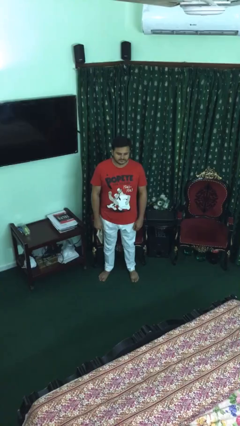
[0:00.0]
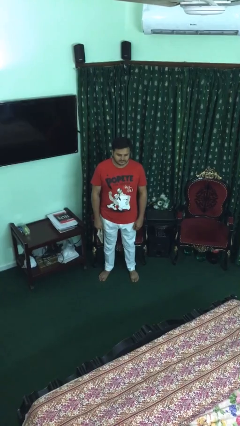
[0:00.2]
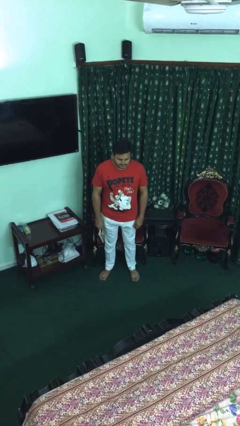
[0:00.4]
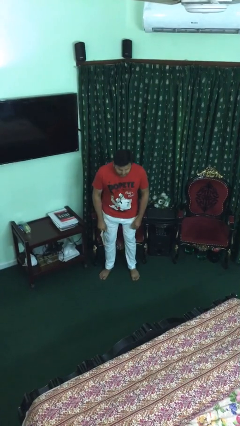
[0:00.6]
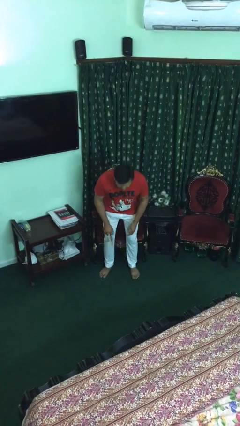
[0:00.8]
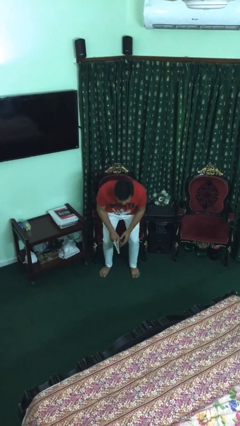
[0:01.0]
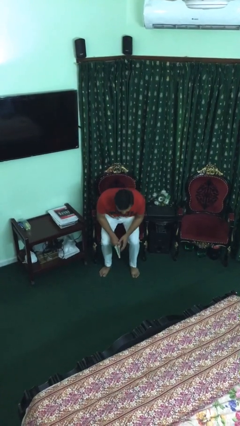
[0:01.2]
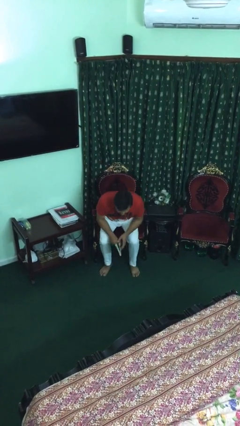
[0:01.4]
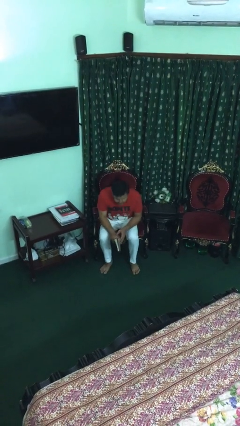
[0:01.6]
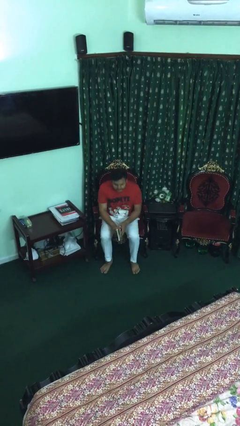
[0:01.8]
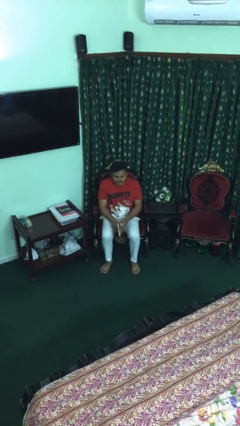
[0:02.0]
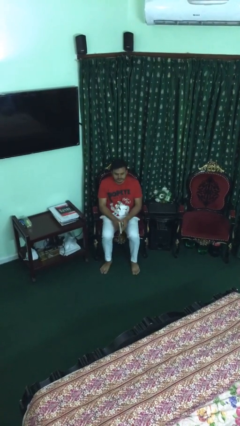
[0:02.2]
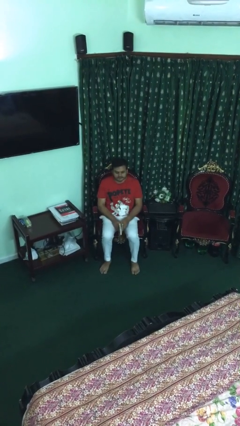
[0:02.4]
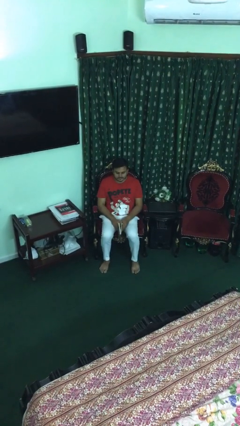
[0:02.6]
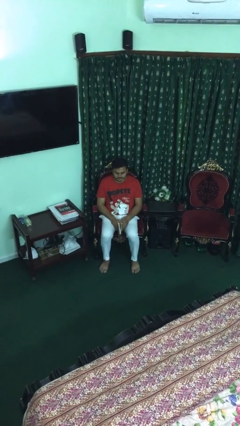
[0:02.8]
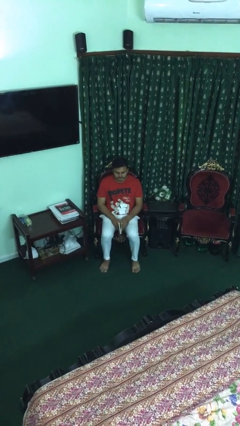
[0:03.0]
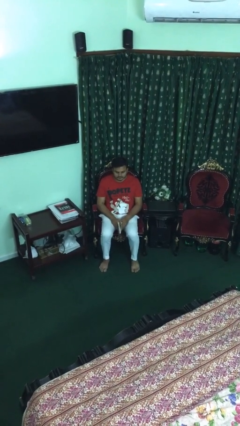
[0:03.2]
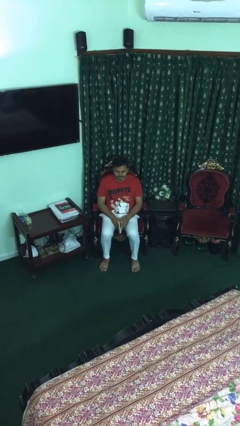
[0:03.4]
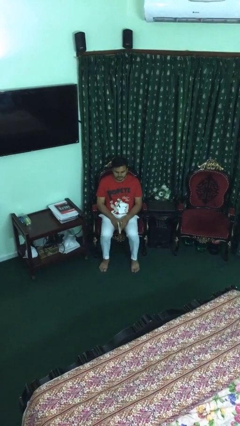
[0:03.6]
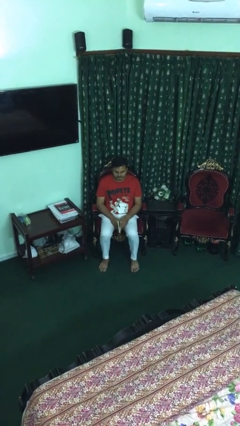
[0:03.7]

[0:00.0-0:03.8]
person sits down

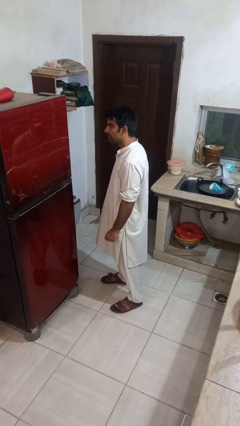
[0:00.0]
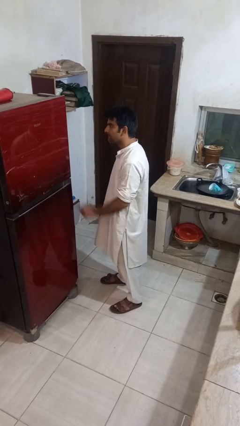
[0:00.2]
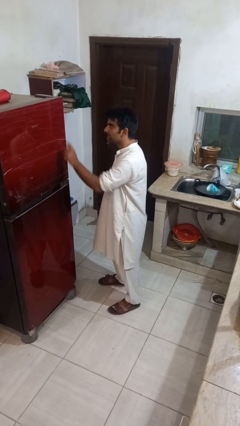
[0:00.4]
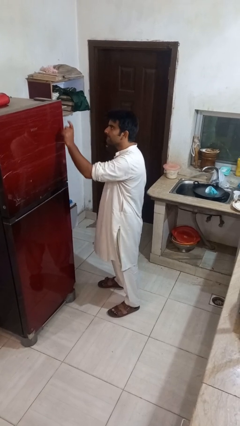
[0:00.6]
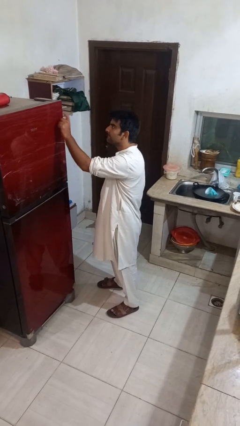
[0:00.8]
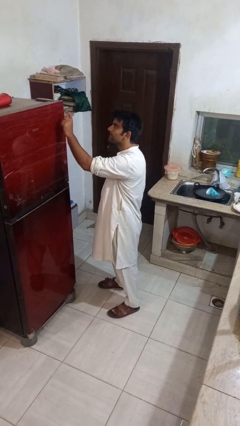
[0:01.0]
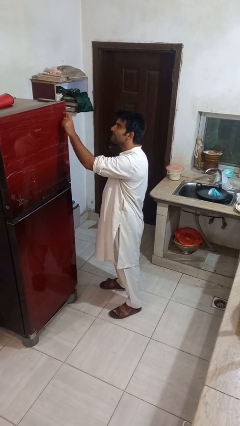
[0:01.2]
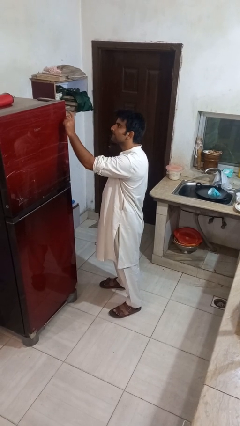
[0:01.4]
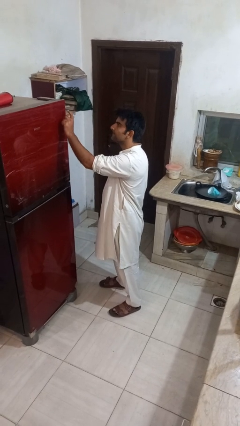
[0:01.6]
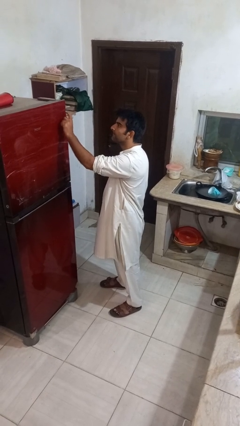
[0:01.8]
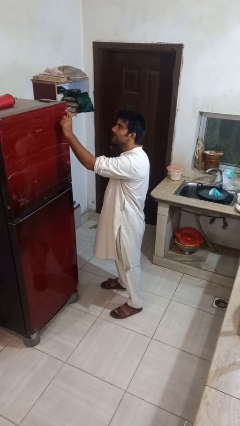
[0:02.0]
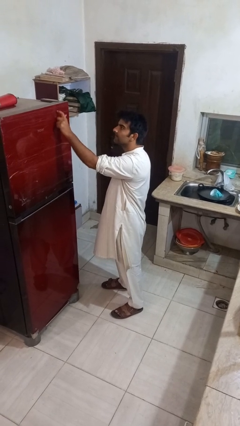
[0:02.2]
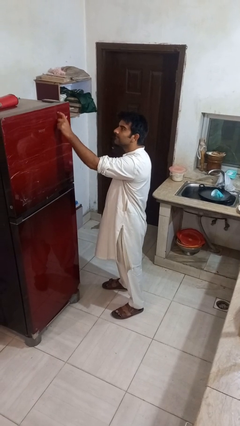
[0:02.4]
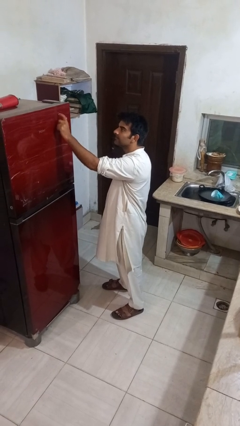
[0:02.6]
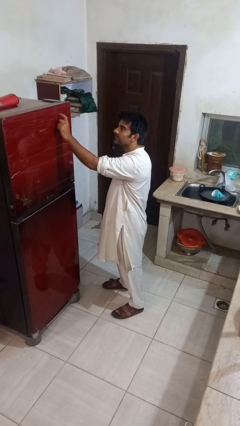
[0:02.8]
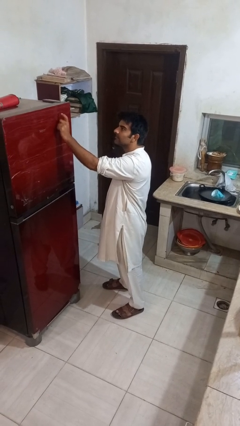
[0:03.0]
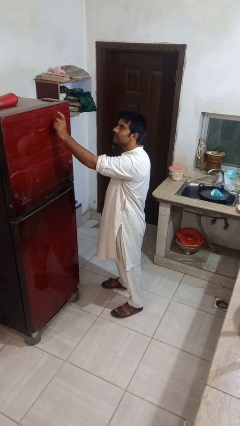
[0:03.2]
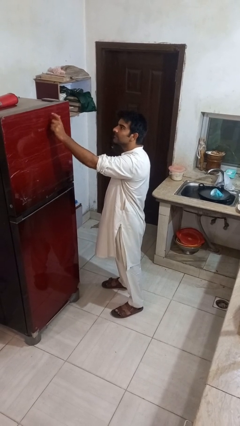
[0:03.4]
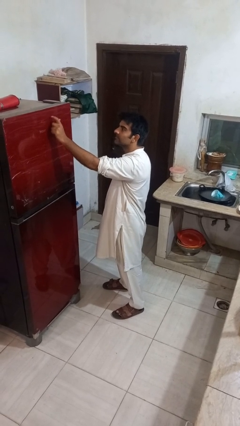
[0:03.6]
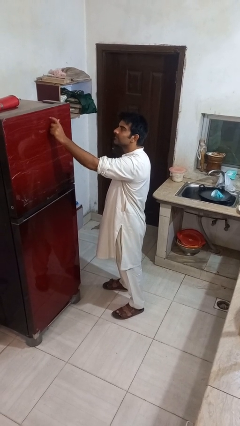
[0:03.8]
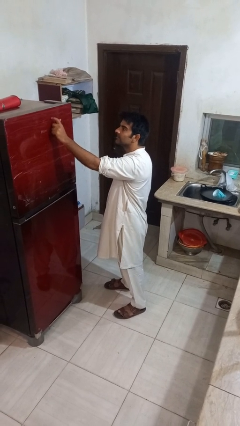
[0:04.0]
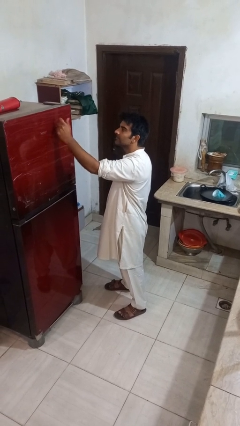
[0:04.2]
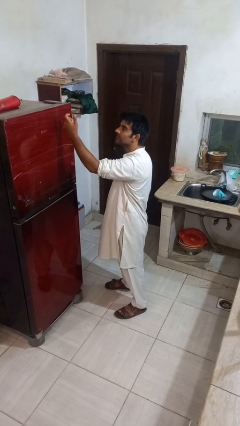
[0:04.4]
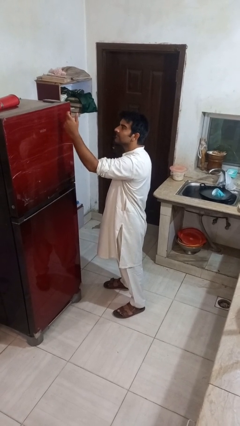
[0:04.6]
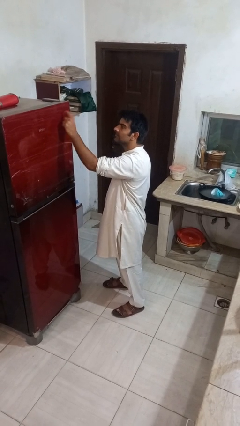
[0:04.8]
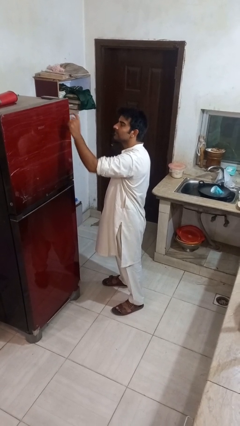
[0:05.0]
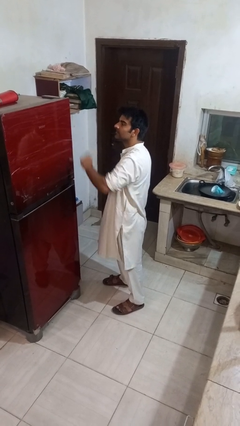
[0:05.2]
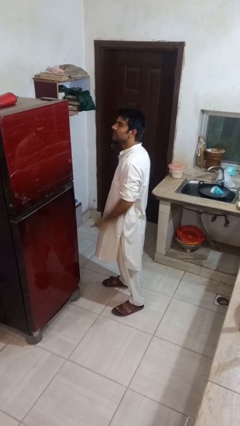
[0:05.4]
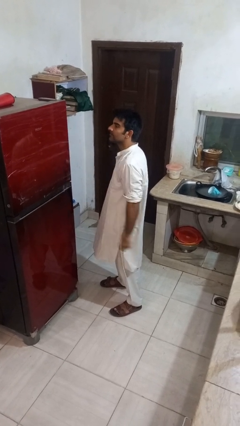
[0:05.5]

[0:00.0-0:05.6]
person taps object with finger

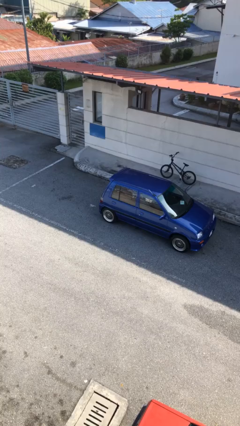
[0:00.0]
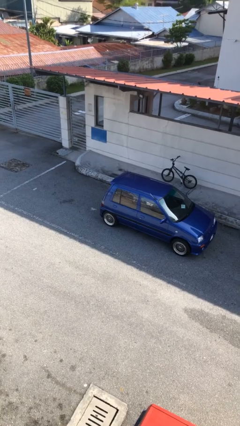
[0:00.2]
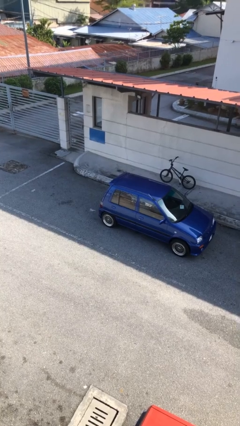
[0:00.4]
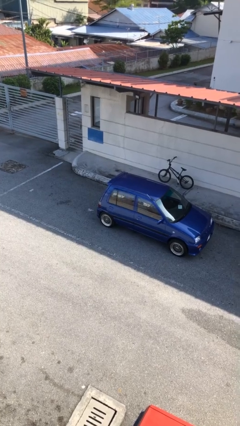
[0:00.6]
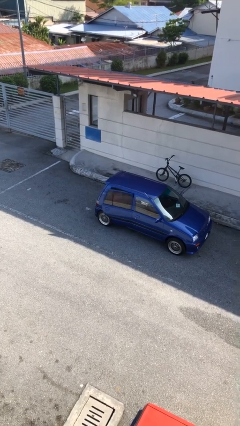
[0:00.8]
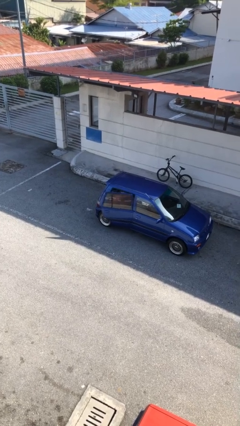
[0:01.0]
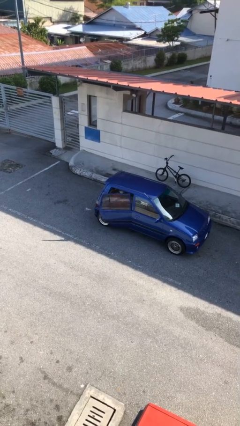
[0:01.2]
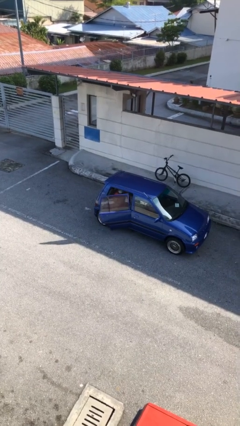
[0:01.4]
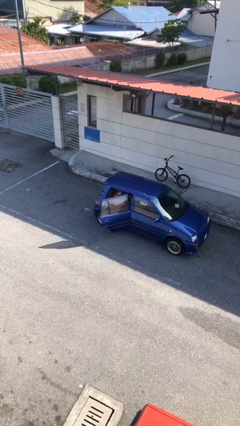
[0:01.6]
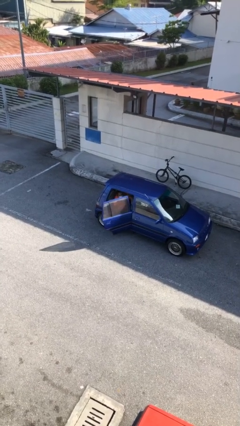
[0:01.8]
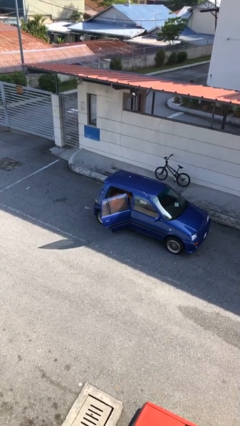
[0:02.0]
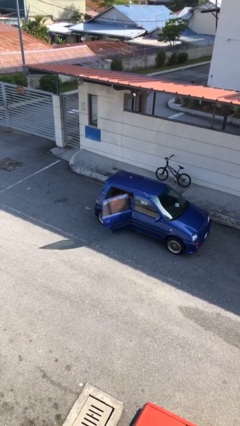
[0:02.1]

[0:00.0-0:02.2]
person opens car door

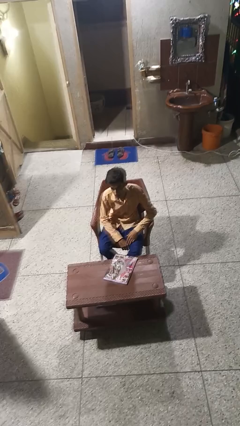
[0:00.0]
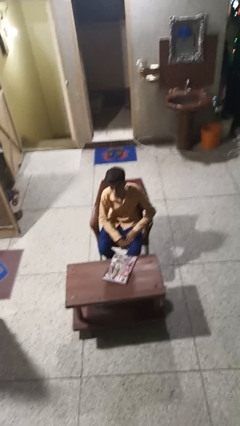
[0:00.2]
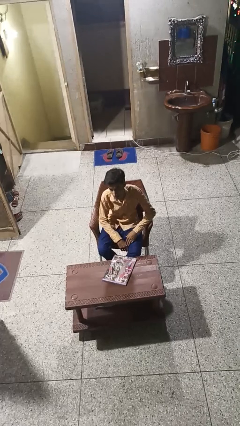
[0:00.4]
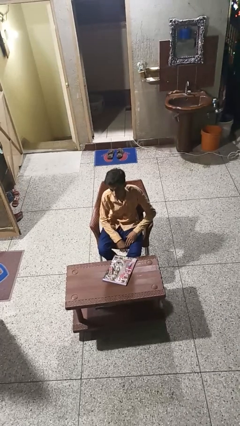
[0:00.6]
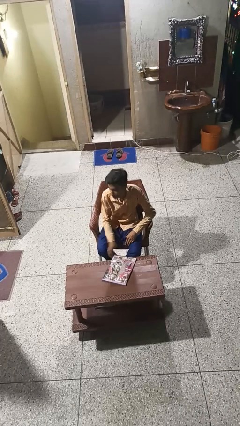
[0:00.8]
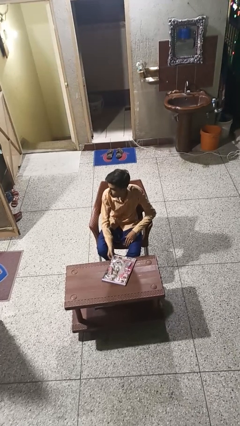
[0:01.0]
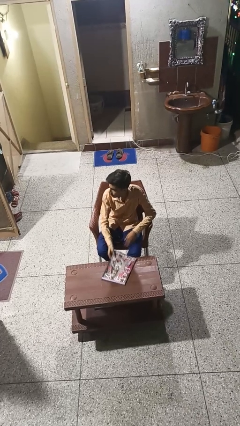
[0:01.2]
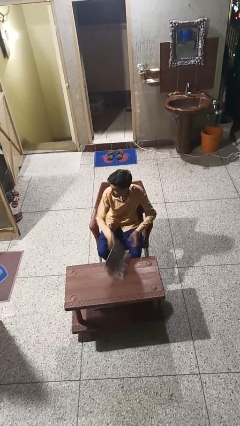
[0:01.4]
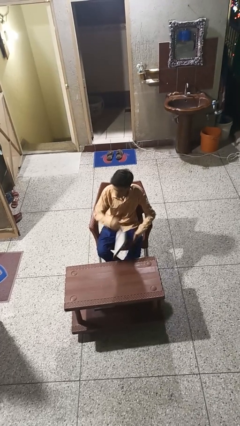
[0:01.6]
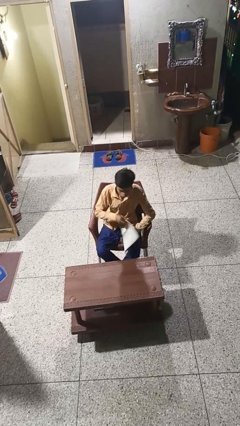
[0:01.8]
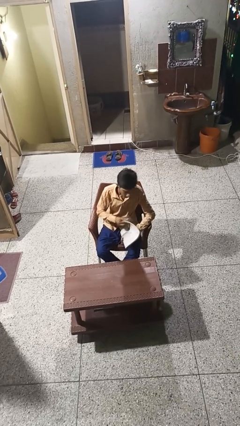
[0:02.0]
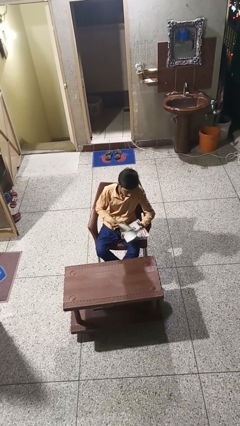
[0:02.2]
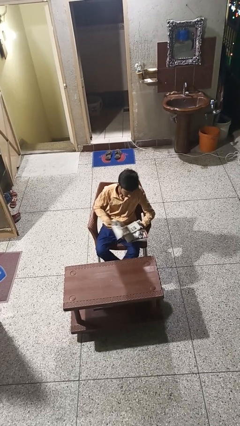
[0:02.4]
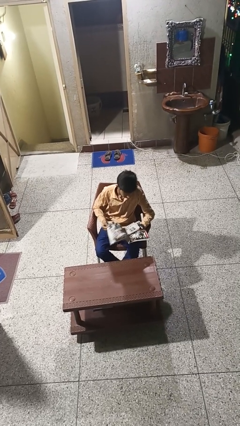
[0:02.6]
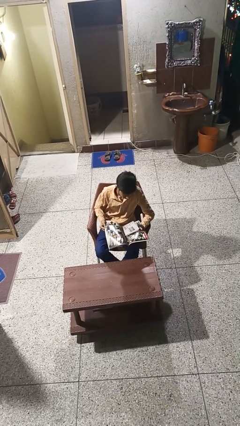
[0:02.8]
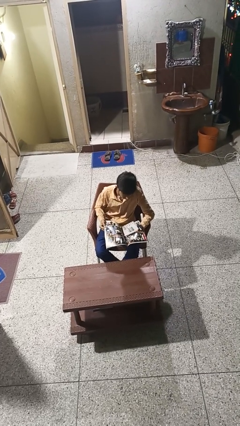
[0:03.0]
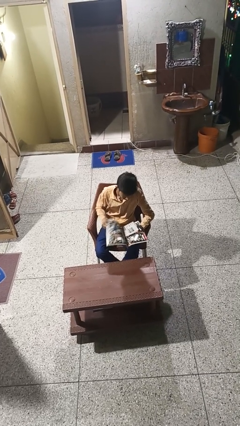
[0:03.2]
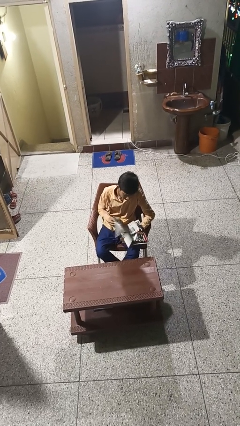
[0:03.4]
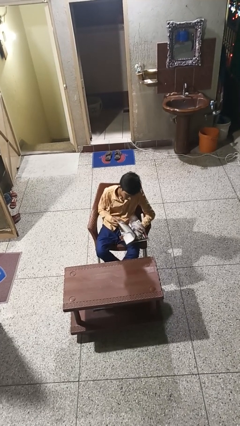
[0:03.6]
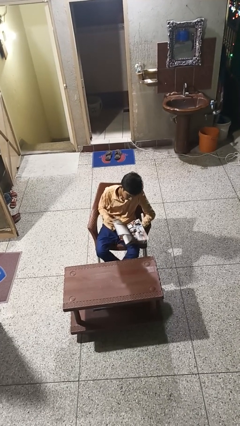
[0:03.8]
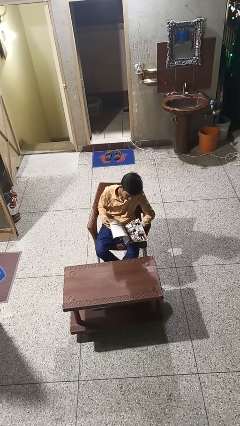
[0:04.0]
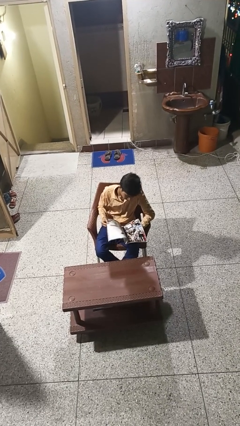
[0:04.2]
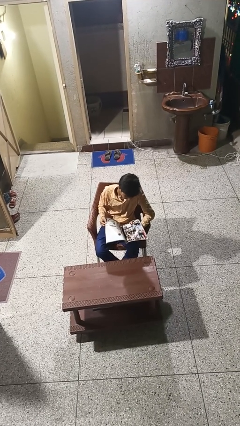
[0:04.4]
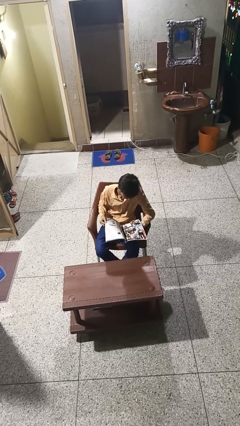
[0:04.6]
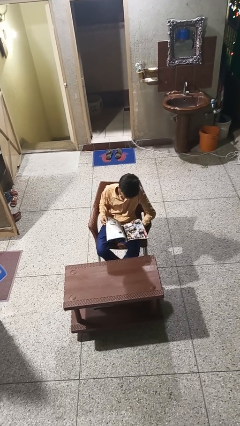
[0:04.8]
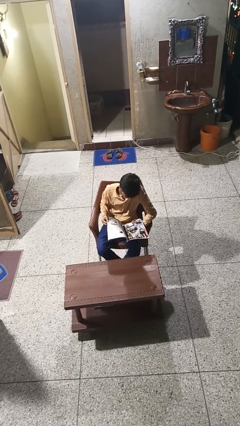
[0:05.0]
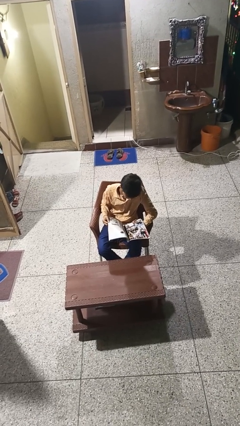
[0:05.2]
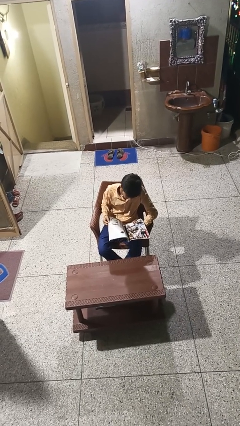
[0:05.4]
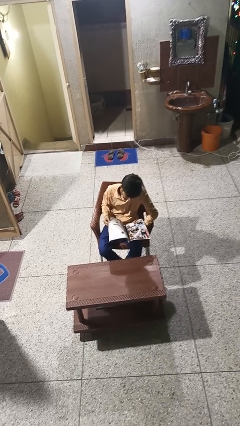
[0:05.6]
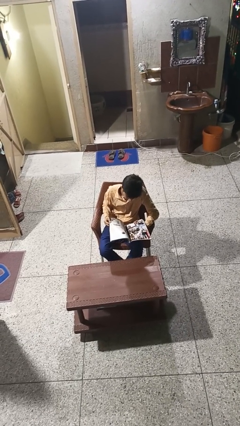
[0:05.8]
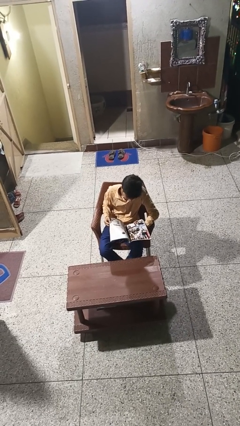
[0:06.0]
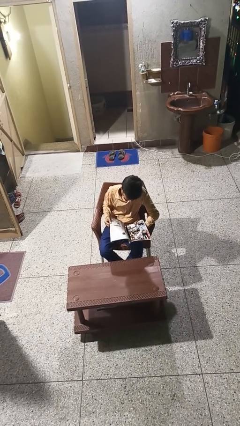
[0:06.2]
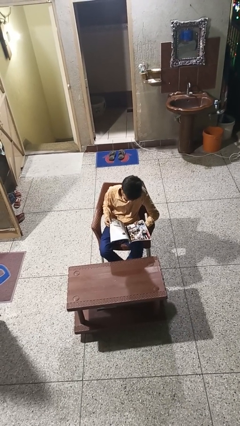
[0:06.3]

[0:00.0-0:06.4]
person reads magazine
